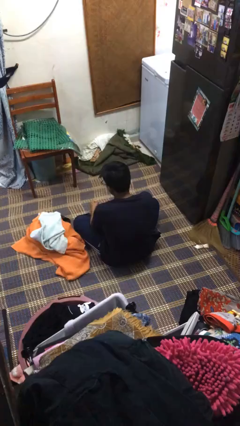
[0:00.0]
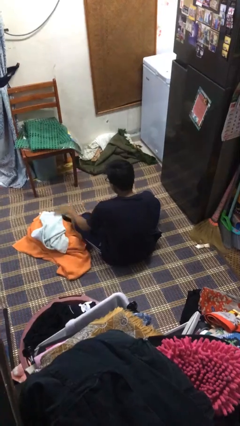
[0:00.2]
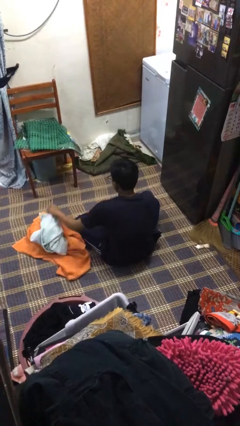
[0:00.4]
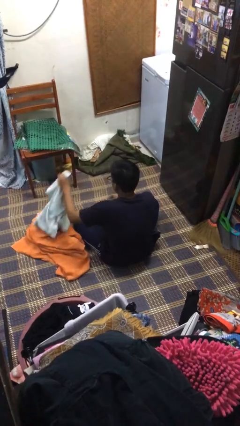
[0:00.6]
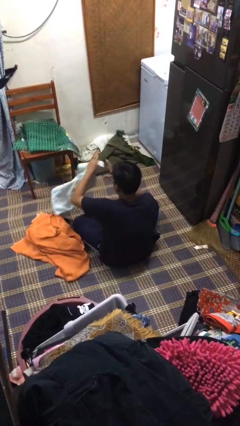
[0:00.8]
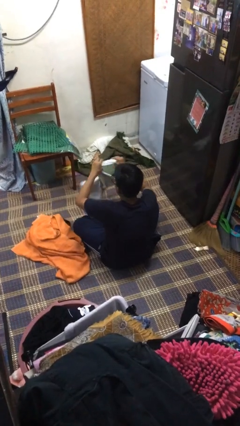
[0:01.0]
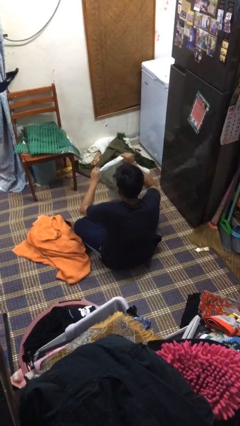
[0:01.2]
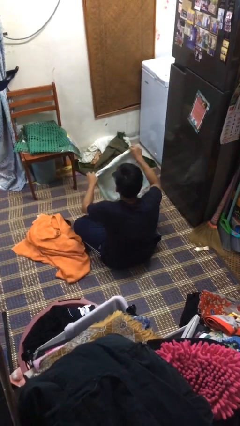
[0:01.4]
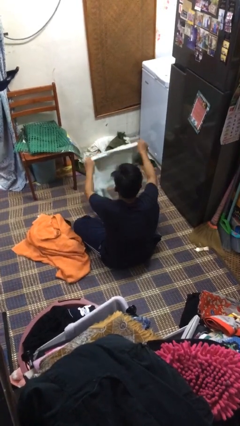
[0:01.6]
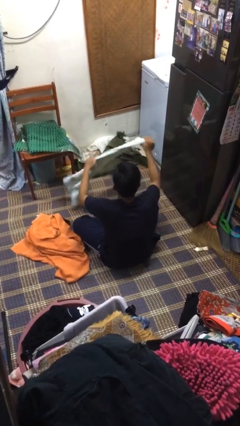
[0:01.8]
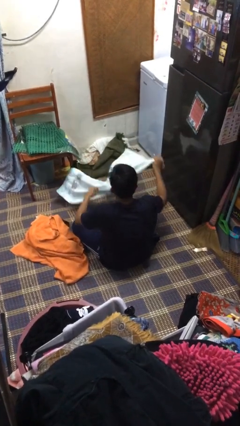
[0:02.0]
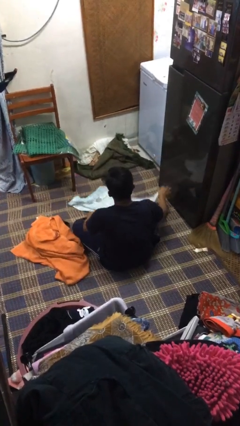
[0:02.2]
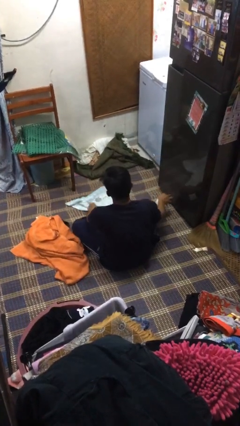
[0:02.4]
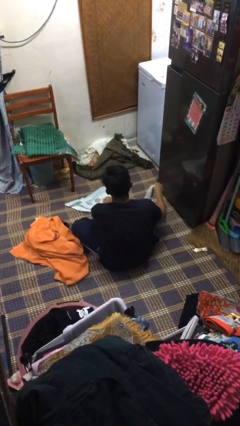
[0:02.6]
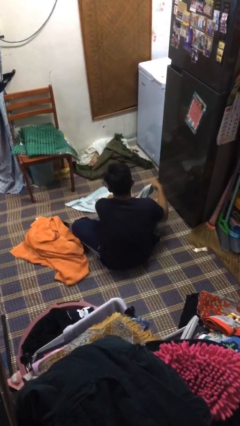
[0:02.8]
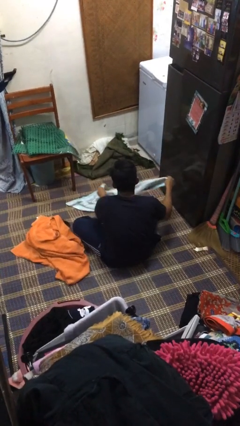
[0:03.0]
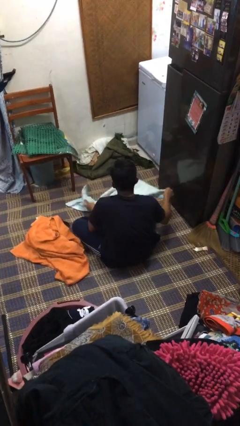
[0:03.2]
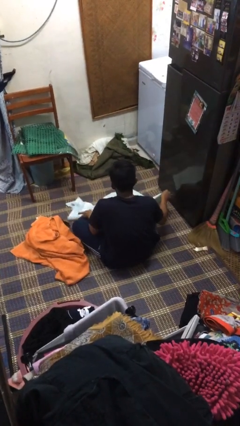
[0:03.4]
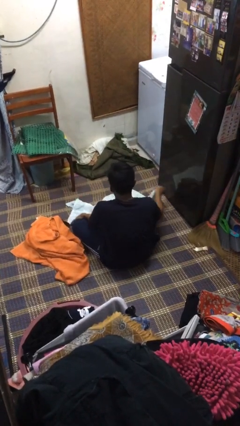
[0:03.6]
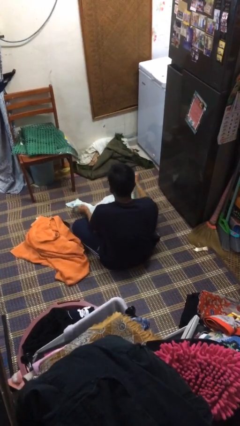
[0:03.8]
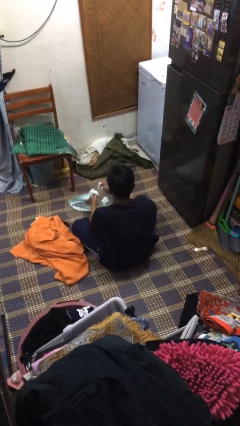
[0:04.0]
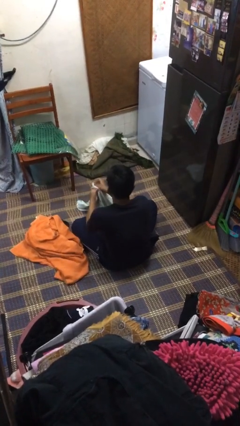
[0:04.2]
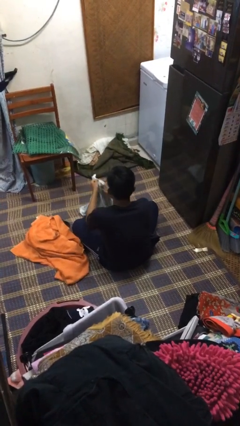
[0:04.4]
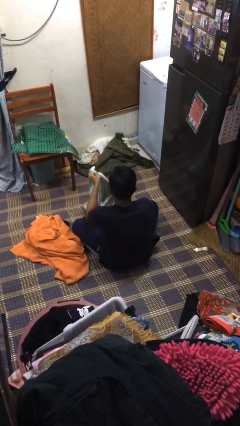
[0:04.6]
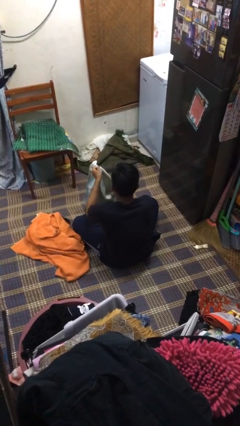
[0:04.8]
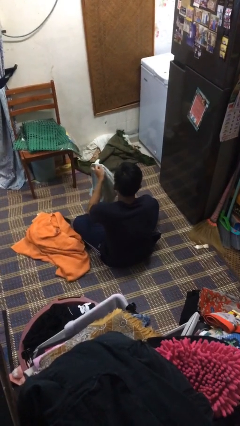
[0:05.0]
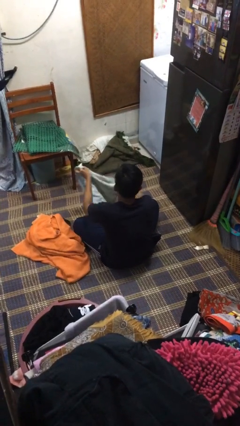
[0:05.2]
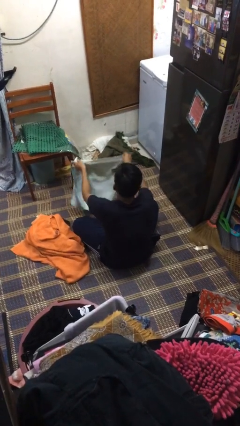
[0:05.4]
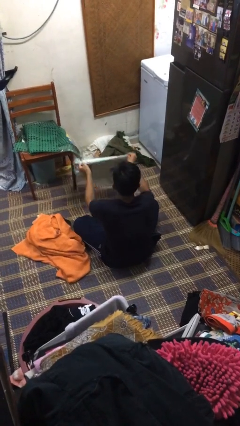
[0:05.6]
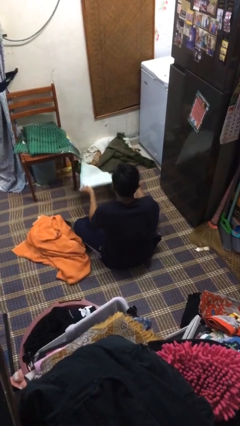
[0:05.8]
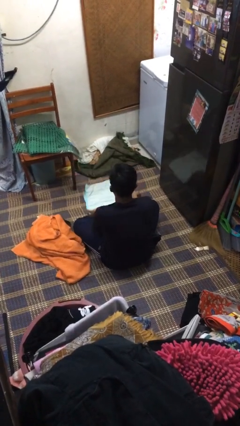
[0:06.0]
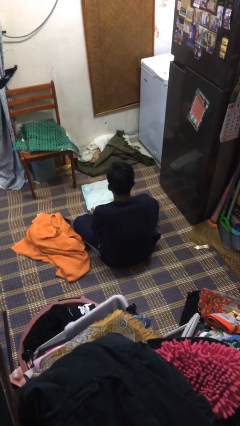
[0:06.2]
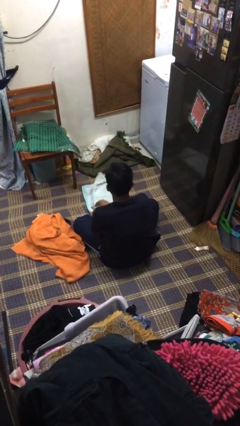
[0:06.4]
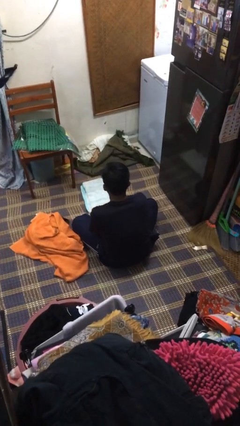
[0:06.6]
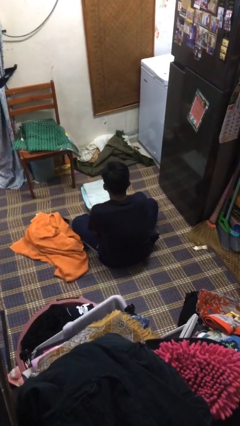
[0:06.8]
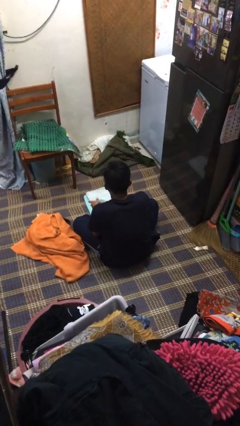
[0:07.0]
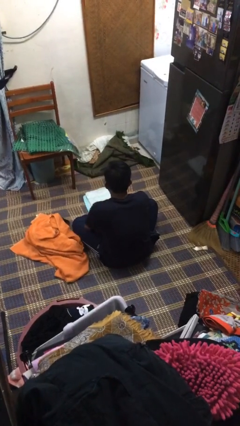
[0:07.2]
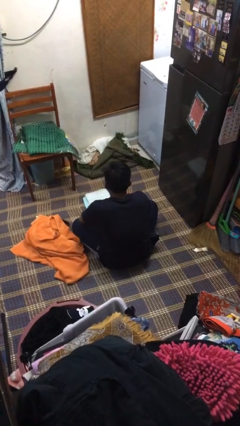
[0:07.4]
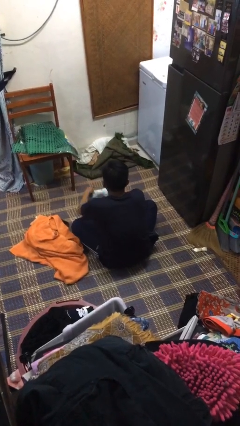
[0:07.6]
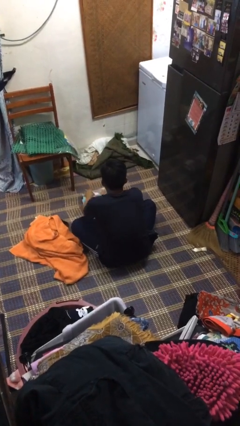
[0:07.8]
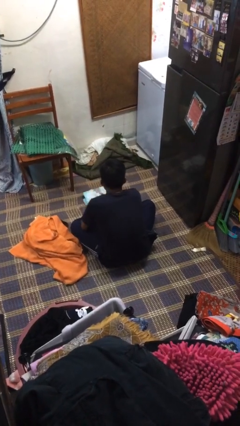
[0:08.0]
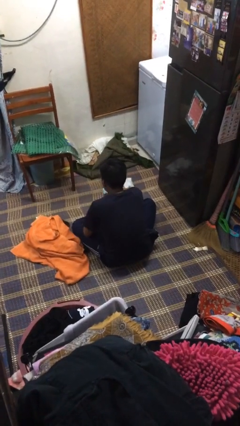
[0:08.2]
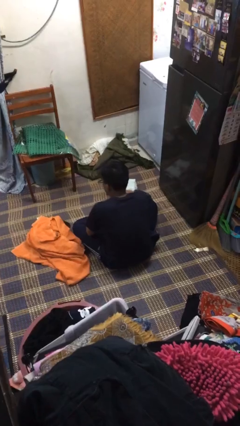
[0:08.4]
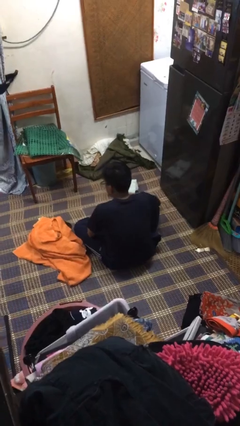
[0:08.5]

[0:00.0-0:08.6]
person folds towel

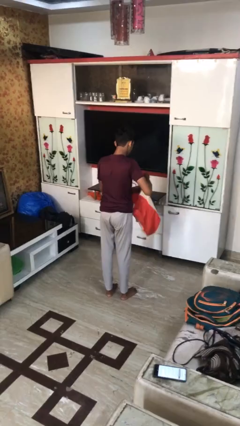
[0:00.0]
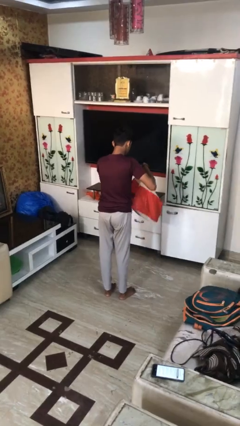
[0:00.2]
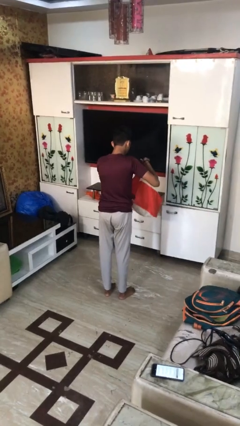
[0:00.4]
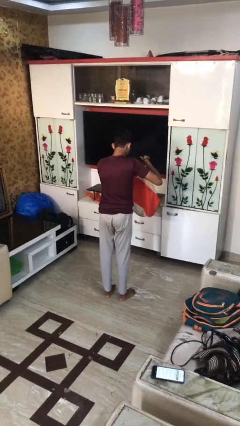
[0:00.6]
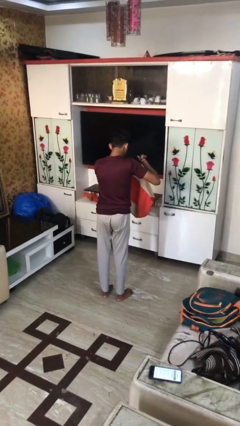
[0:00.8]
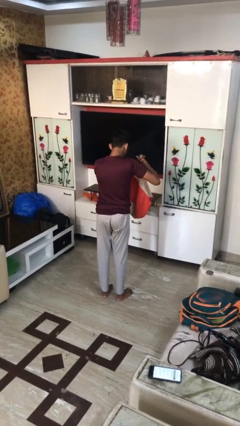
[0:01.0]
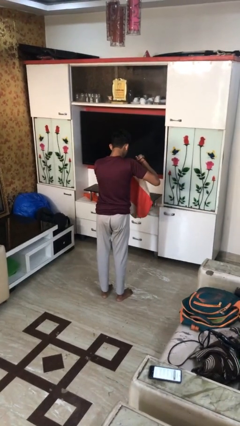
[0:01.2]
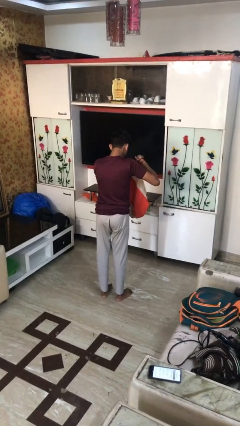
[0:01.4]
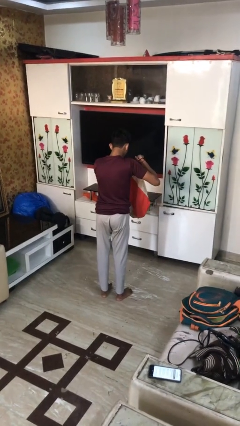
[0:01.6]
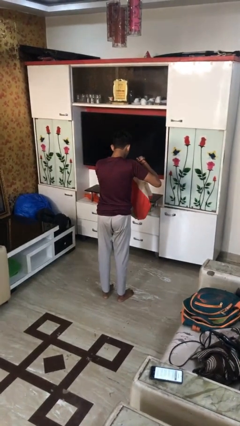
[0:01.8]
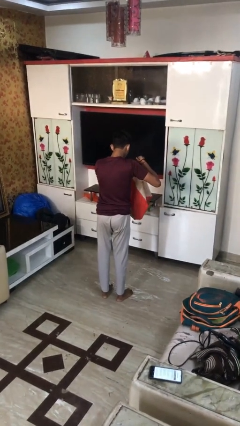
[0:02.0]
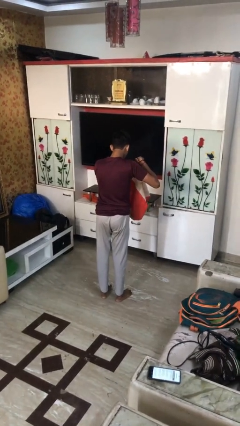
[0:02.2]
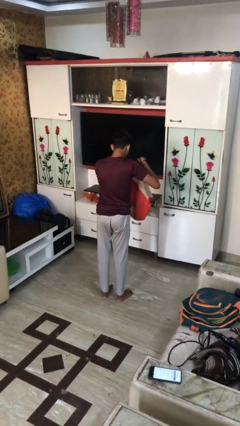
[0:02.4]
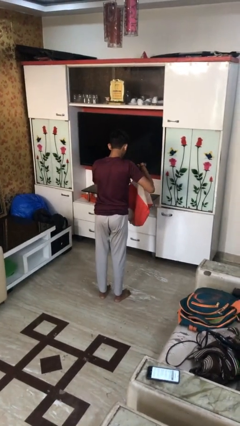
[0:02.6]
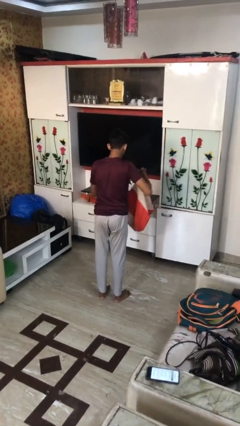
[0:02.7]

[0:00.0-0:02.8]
person searches in bag

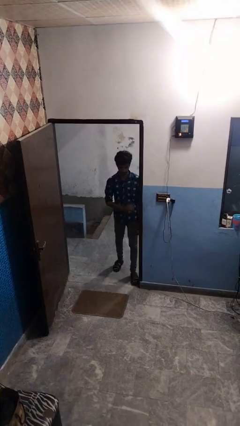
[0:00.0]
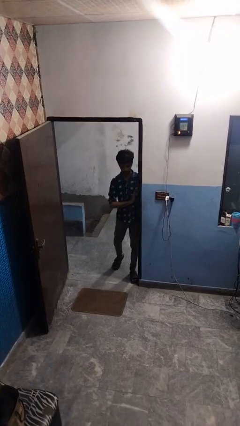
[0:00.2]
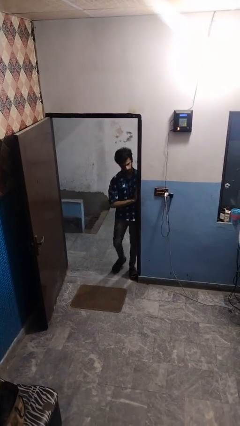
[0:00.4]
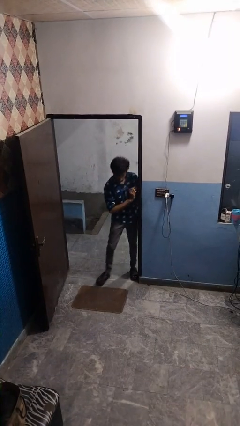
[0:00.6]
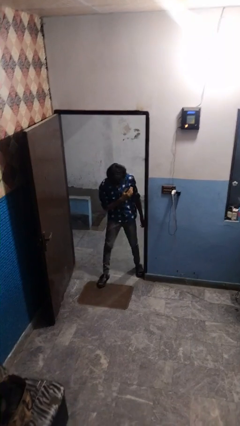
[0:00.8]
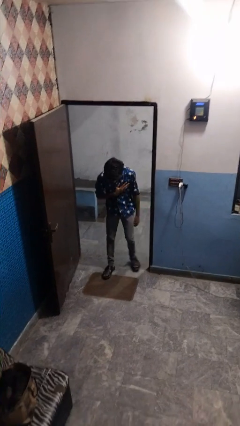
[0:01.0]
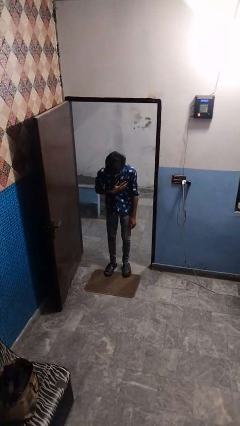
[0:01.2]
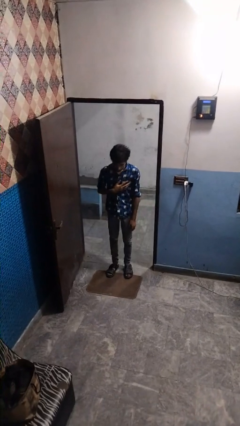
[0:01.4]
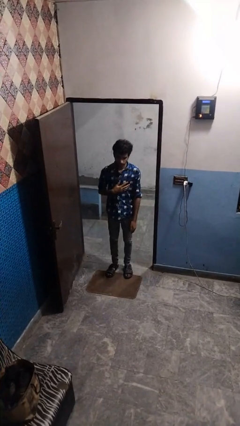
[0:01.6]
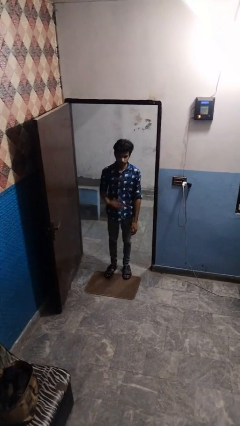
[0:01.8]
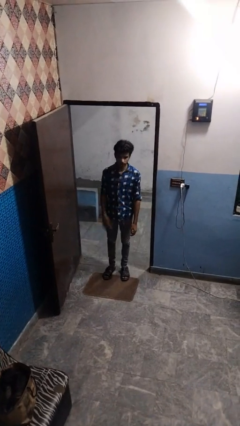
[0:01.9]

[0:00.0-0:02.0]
person bumps into wall

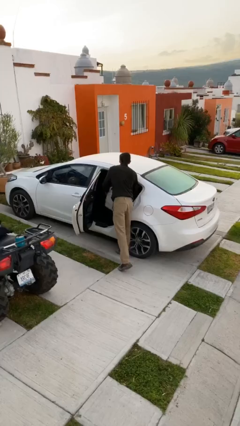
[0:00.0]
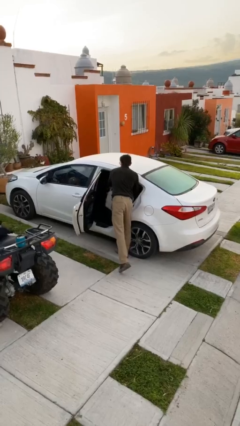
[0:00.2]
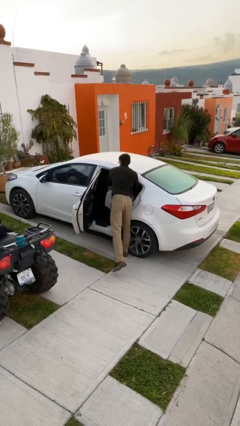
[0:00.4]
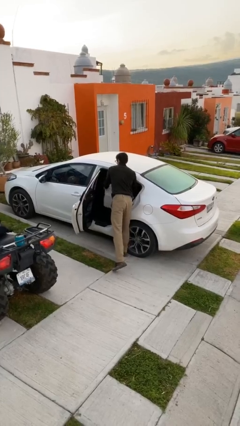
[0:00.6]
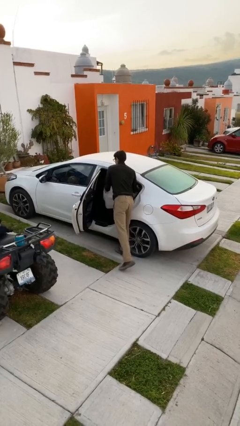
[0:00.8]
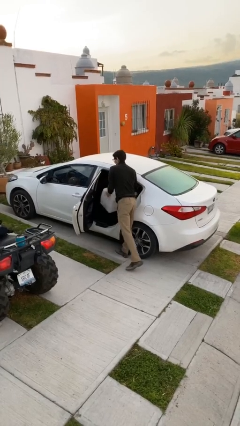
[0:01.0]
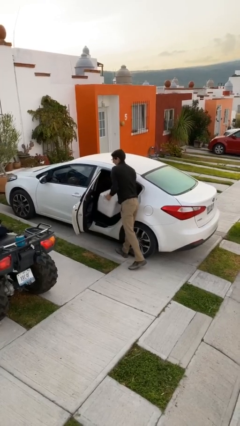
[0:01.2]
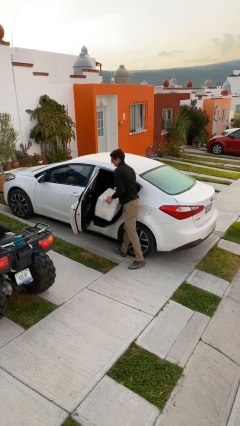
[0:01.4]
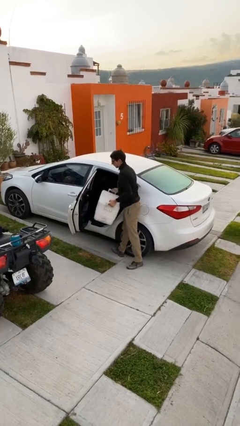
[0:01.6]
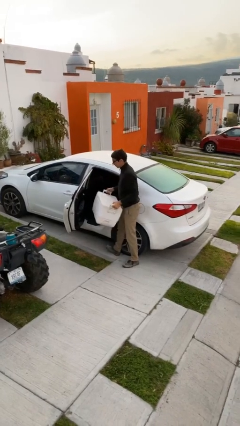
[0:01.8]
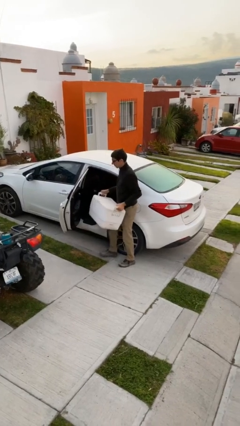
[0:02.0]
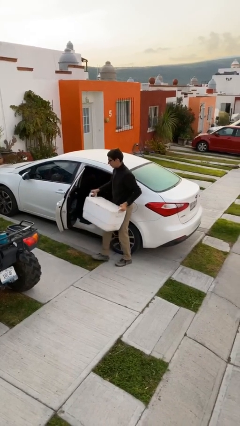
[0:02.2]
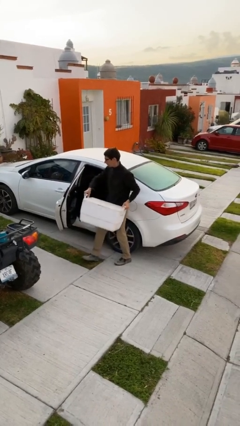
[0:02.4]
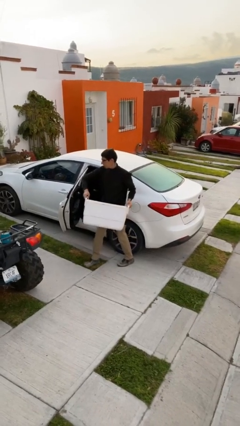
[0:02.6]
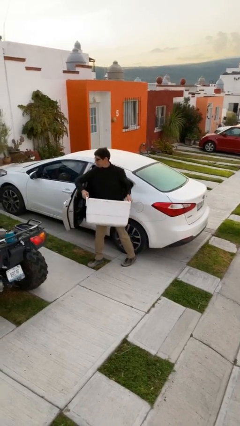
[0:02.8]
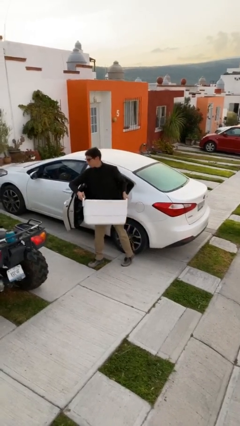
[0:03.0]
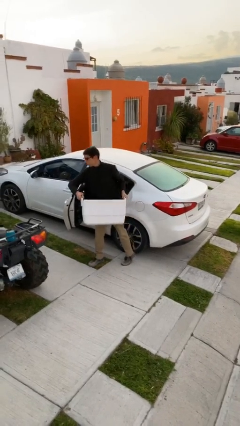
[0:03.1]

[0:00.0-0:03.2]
person unloads car

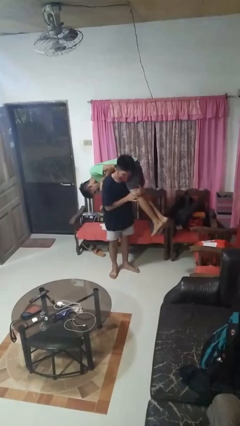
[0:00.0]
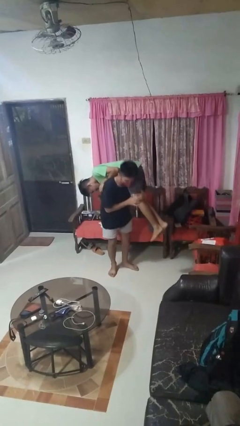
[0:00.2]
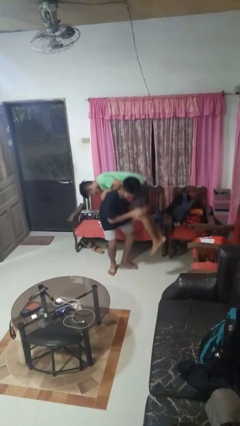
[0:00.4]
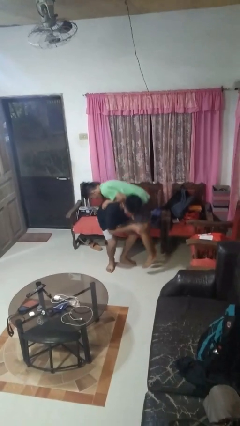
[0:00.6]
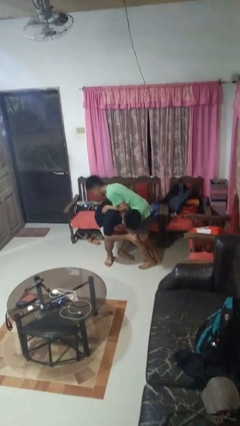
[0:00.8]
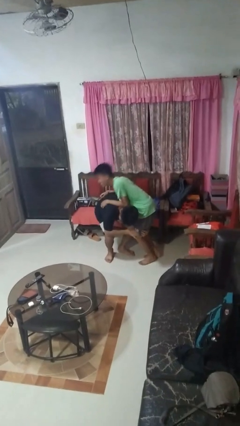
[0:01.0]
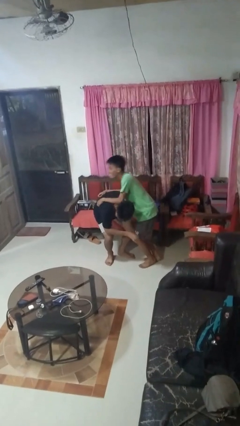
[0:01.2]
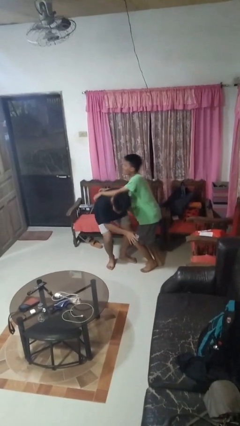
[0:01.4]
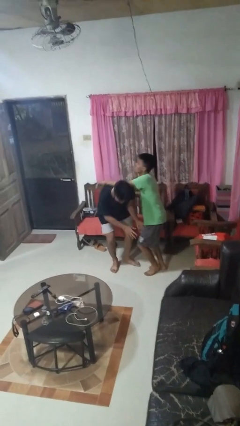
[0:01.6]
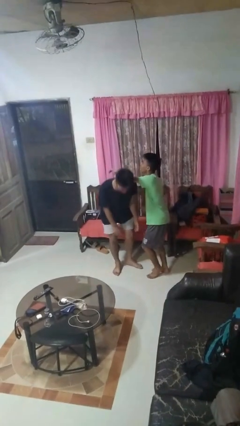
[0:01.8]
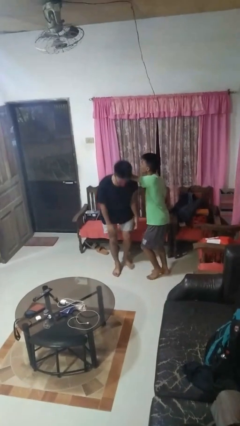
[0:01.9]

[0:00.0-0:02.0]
person puts down person
